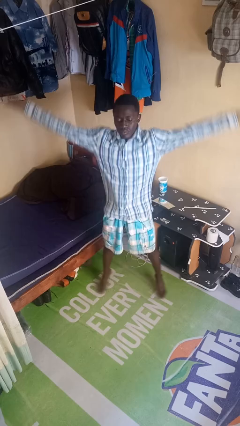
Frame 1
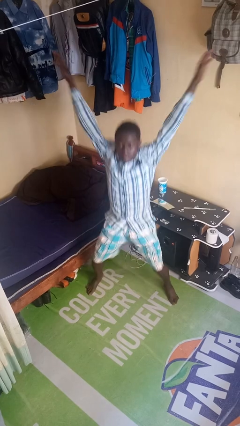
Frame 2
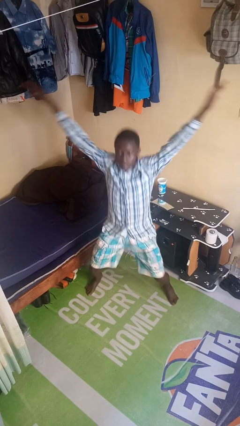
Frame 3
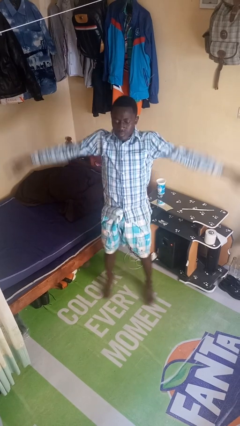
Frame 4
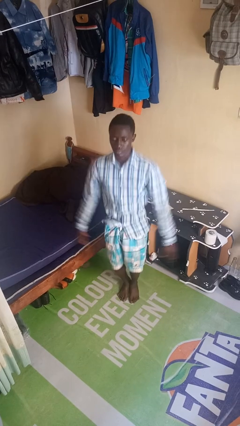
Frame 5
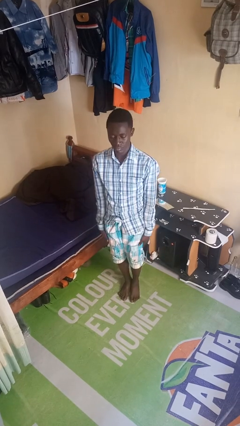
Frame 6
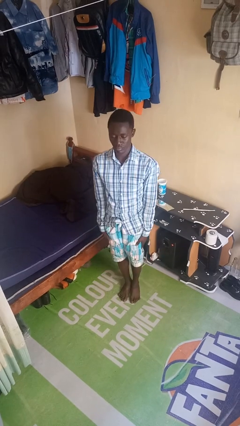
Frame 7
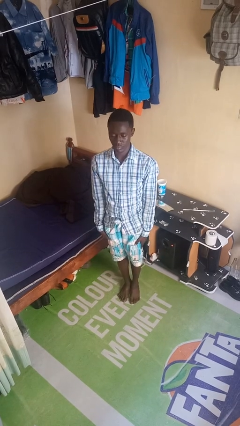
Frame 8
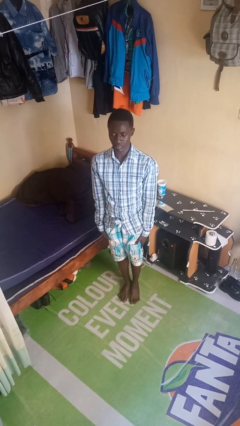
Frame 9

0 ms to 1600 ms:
person exercises with jumping jacks

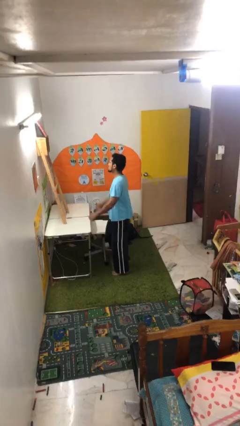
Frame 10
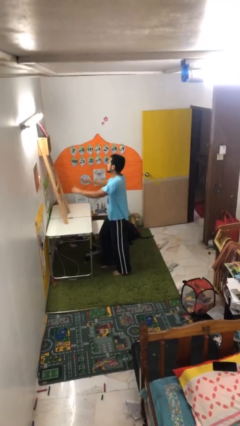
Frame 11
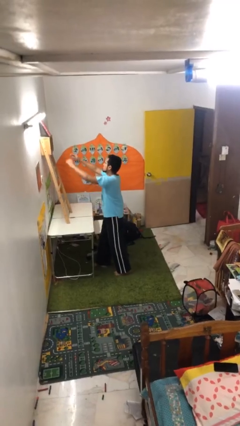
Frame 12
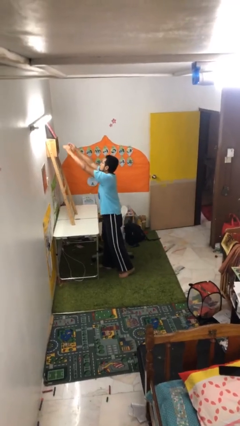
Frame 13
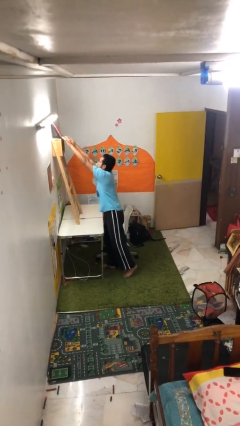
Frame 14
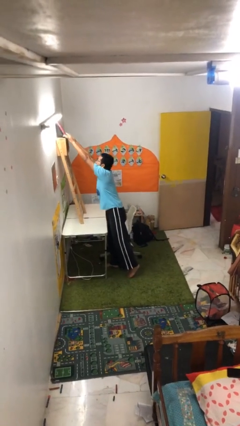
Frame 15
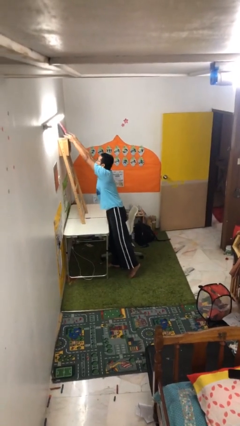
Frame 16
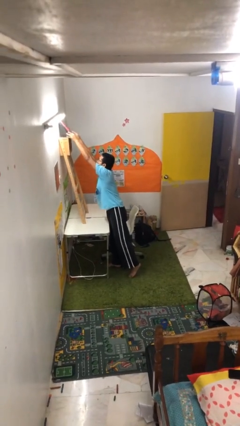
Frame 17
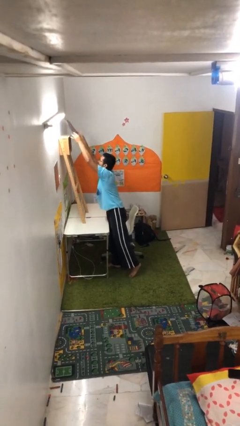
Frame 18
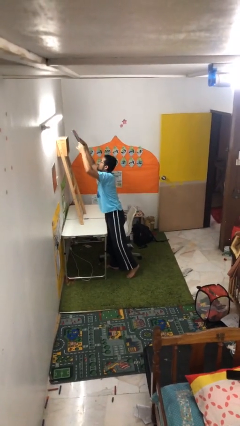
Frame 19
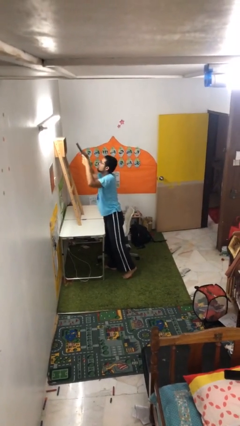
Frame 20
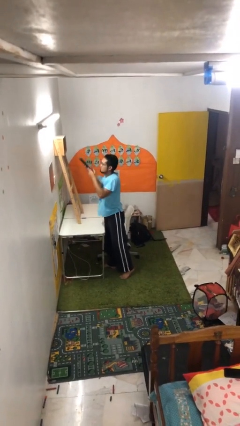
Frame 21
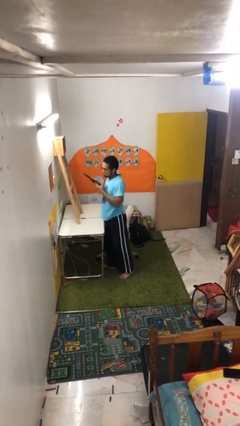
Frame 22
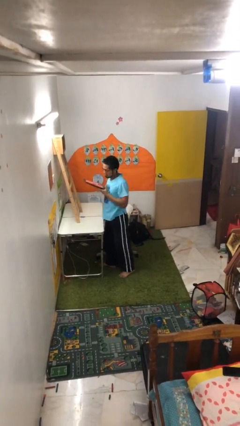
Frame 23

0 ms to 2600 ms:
person picks up object from shelf

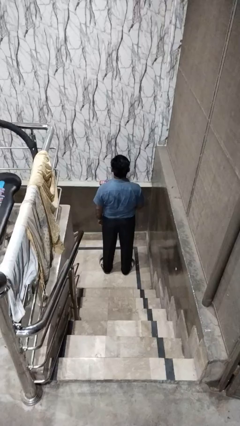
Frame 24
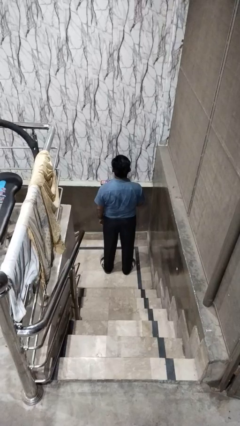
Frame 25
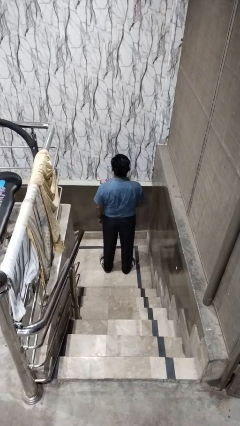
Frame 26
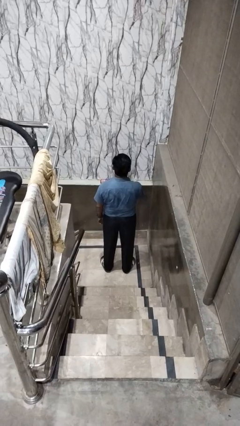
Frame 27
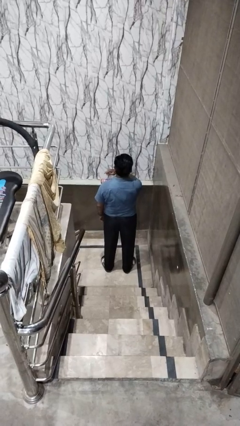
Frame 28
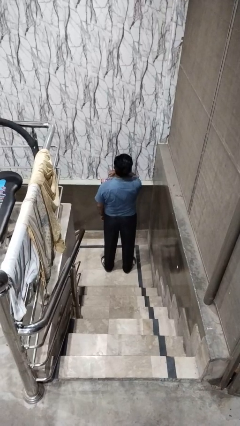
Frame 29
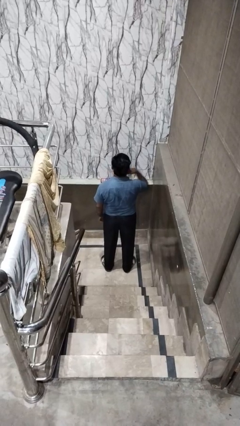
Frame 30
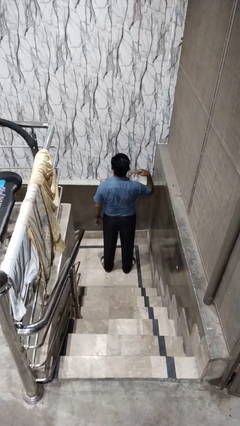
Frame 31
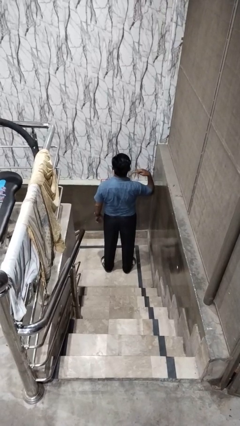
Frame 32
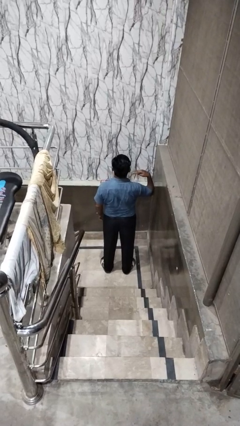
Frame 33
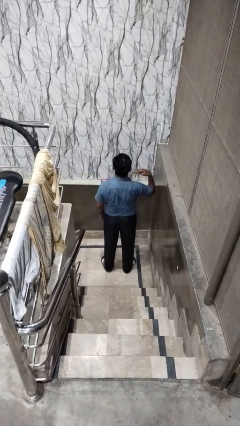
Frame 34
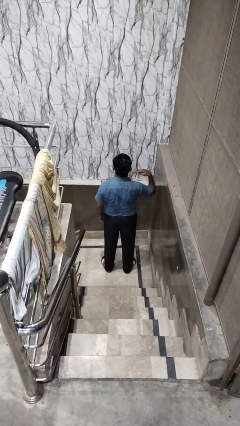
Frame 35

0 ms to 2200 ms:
person gestures cut

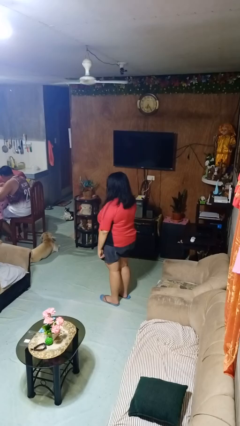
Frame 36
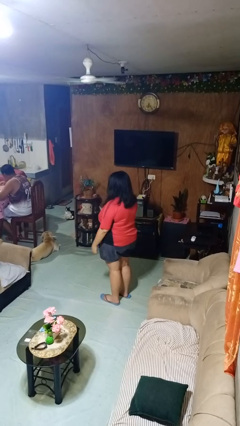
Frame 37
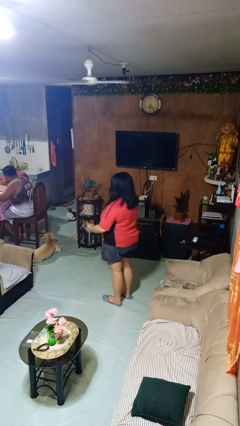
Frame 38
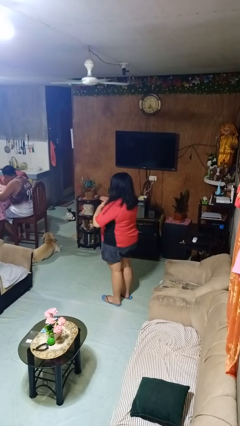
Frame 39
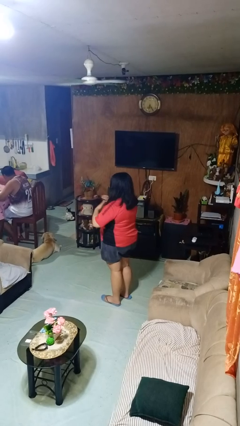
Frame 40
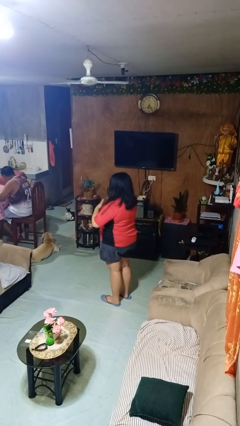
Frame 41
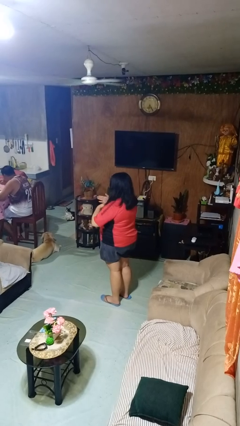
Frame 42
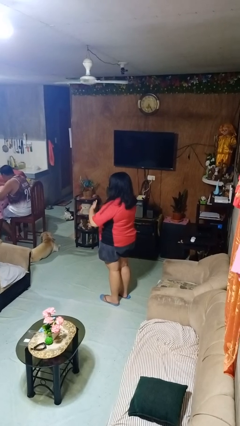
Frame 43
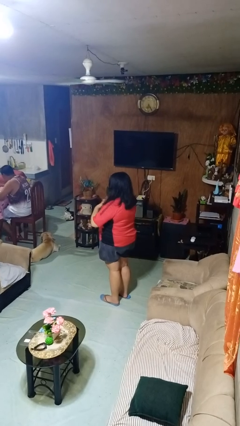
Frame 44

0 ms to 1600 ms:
person drums on chest

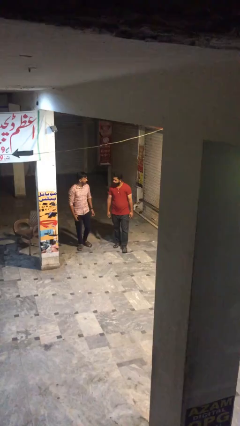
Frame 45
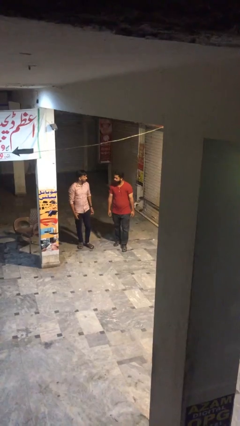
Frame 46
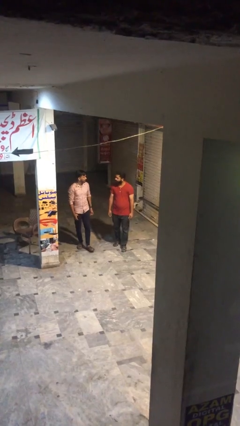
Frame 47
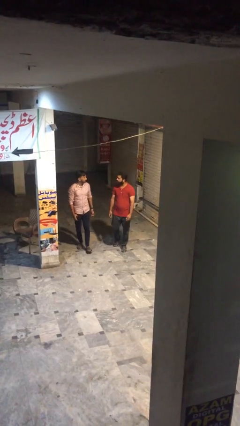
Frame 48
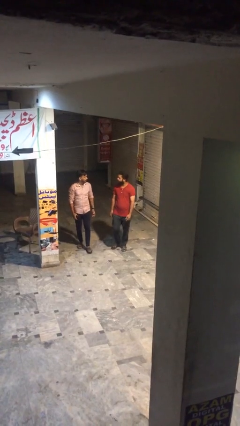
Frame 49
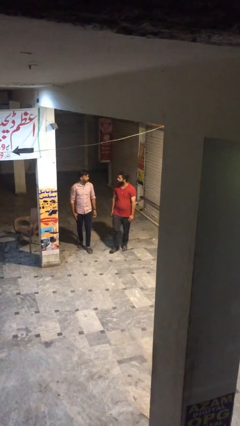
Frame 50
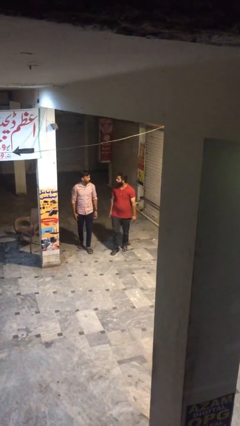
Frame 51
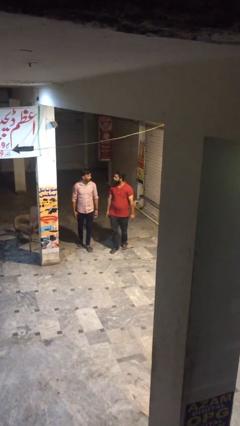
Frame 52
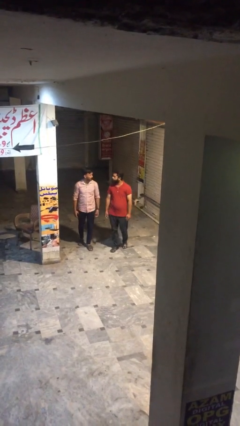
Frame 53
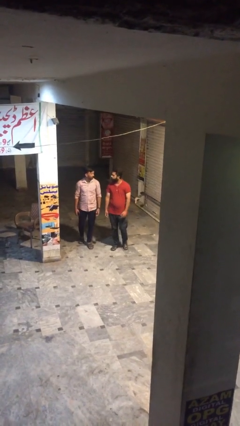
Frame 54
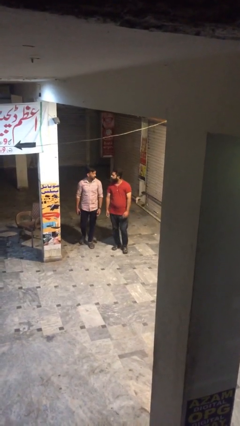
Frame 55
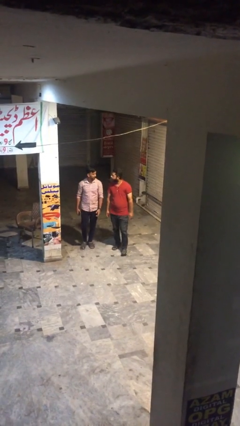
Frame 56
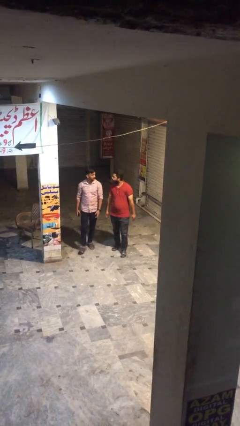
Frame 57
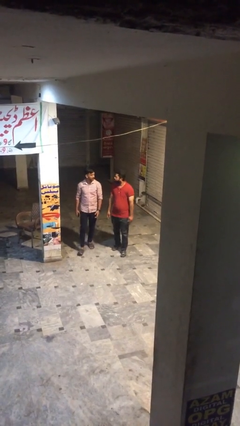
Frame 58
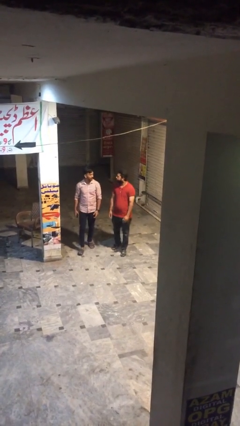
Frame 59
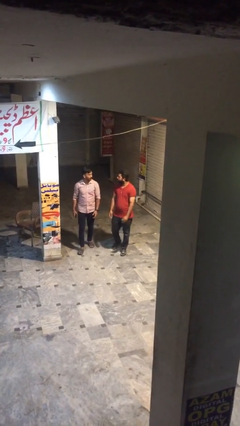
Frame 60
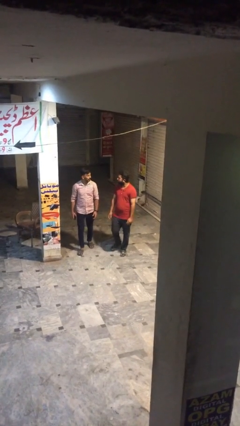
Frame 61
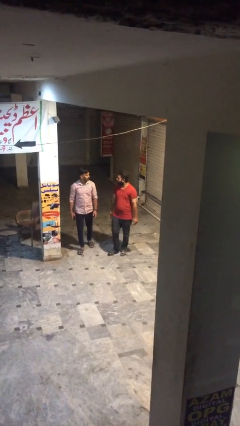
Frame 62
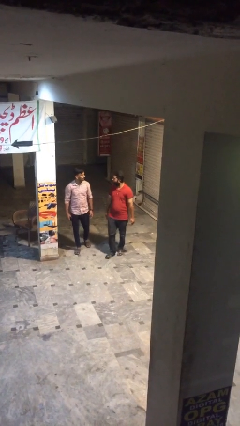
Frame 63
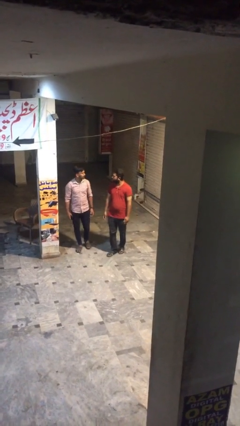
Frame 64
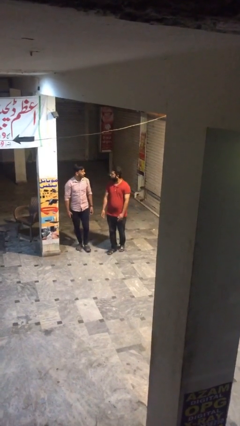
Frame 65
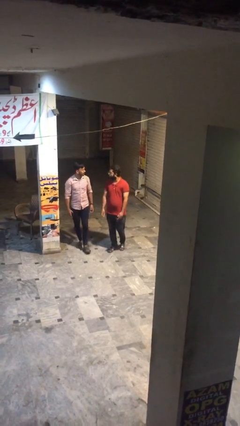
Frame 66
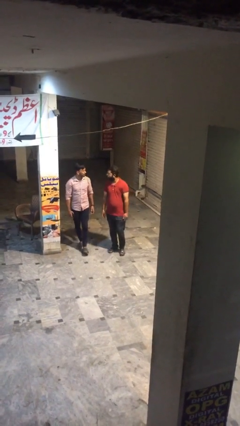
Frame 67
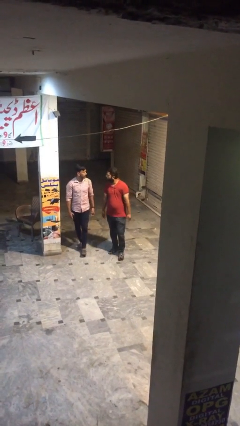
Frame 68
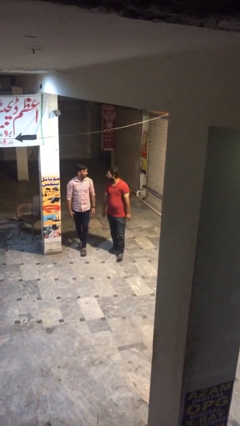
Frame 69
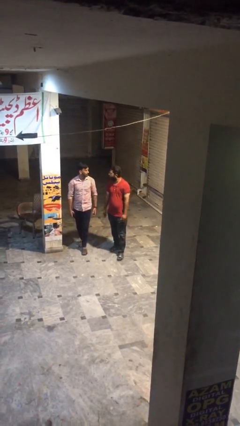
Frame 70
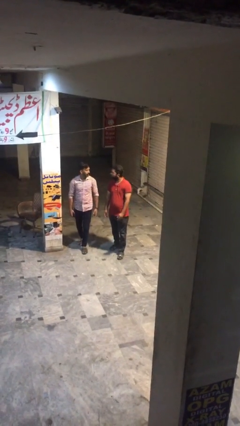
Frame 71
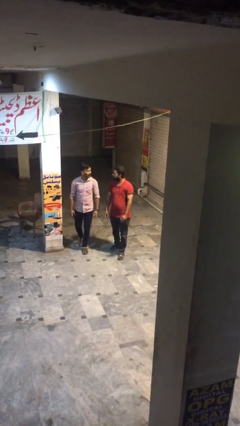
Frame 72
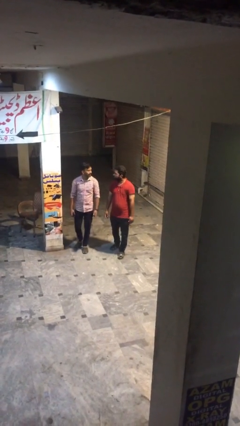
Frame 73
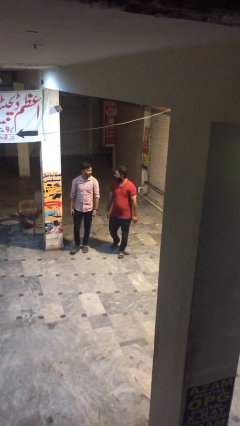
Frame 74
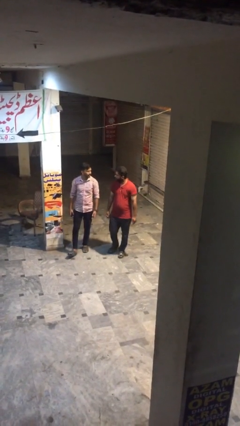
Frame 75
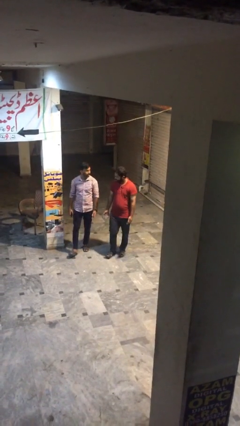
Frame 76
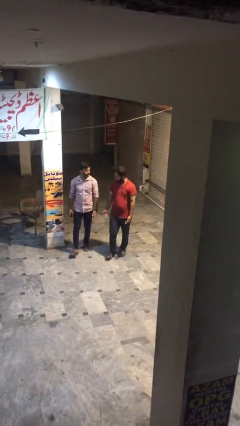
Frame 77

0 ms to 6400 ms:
person talks to person

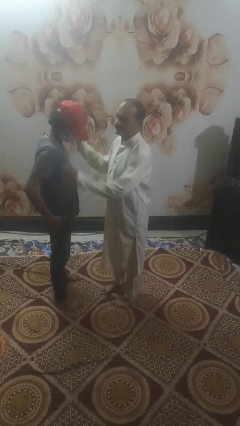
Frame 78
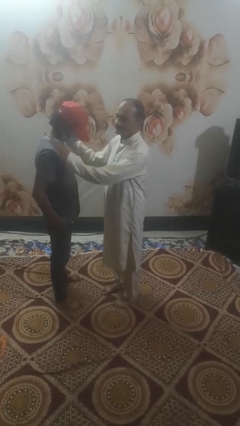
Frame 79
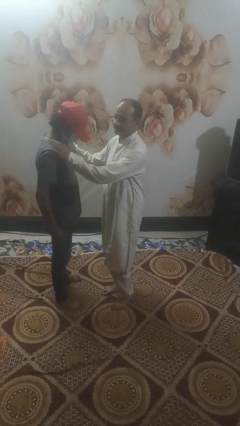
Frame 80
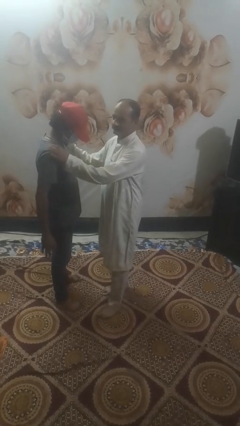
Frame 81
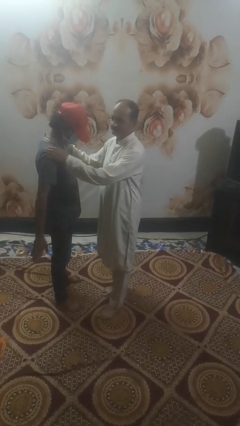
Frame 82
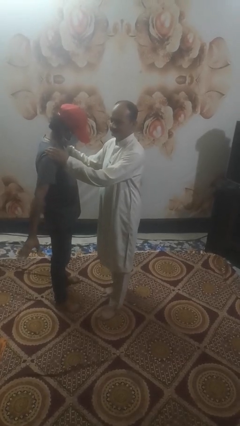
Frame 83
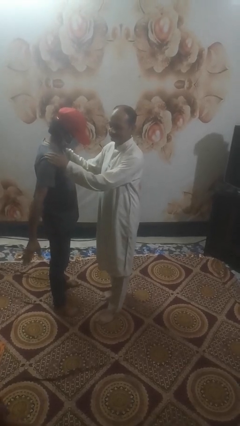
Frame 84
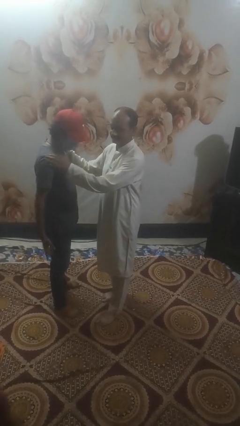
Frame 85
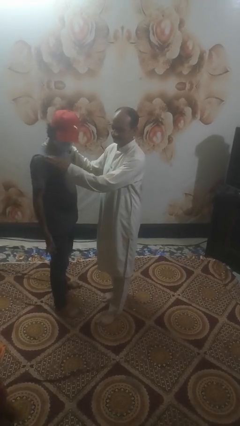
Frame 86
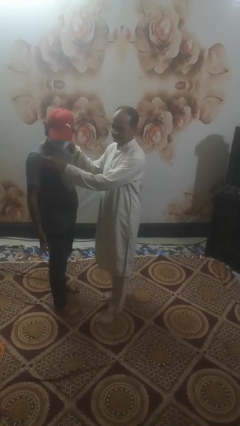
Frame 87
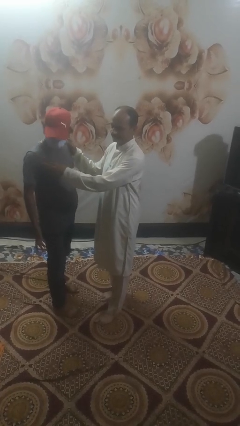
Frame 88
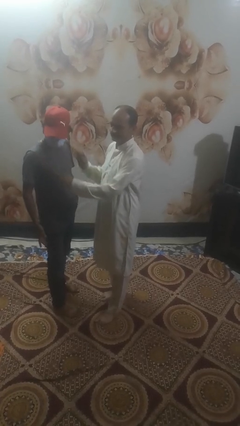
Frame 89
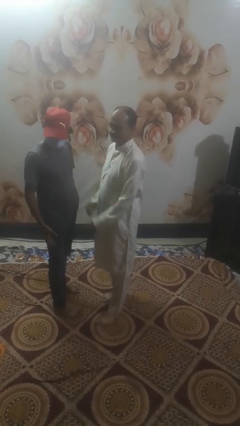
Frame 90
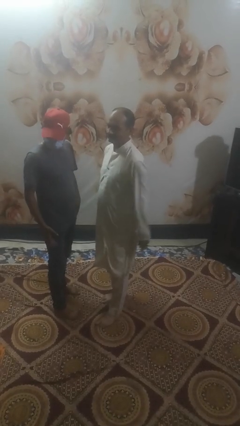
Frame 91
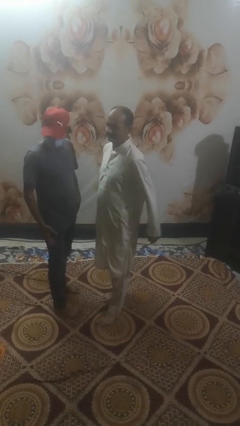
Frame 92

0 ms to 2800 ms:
person pounds shoulders of person

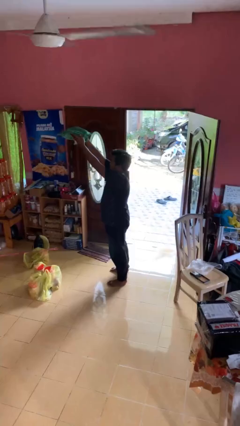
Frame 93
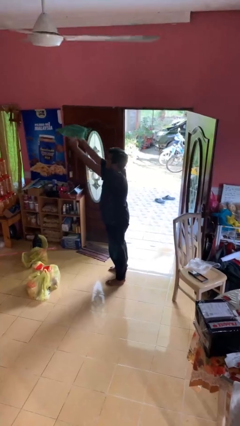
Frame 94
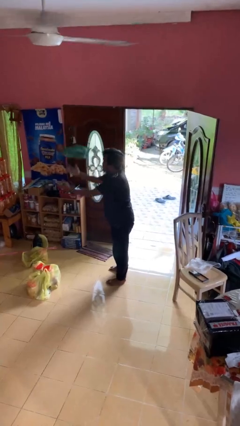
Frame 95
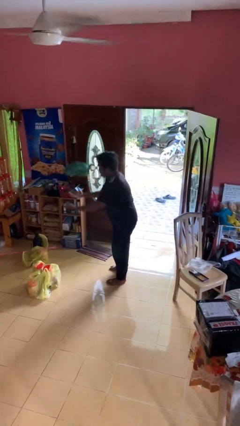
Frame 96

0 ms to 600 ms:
person drops object
